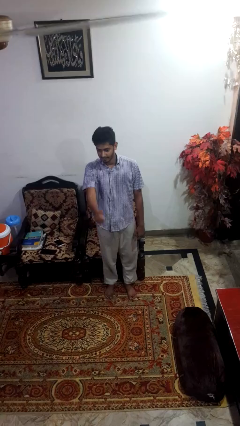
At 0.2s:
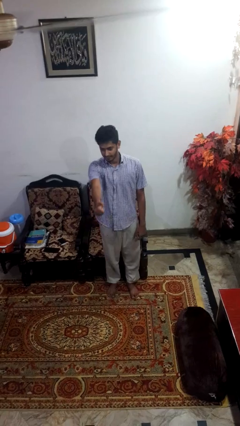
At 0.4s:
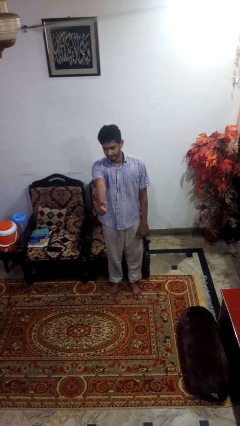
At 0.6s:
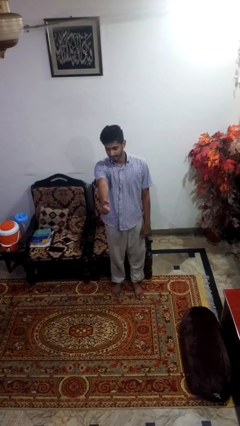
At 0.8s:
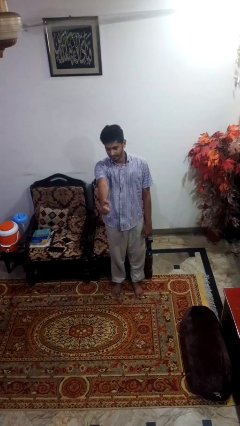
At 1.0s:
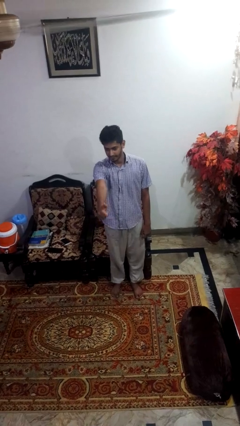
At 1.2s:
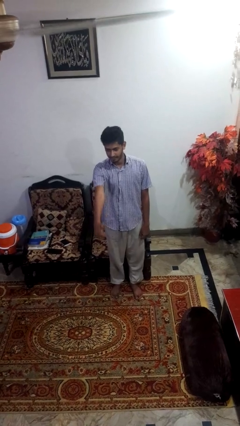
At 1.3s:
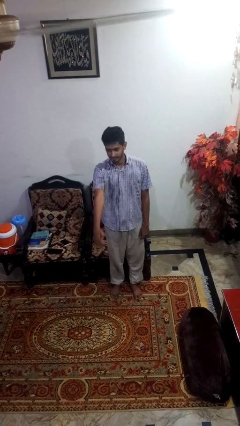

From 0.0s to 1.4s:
person gestures thumbs up

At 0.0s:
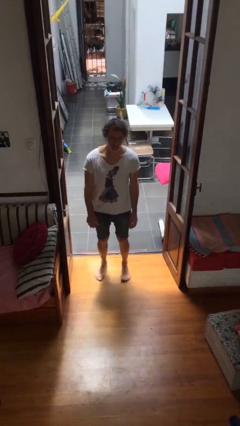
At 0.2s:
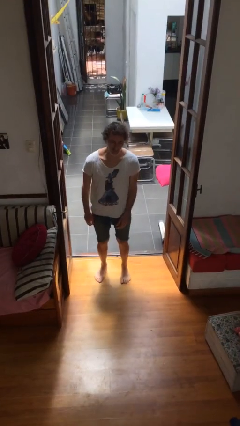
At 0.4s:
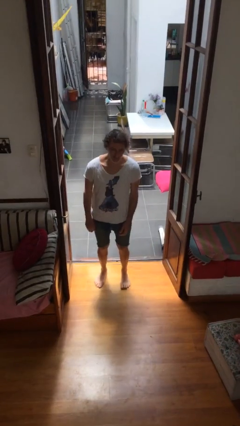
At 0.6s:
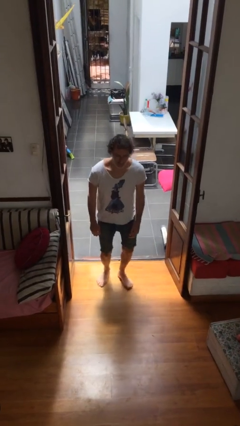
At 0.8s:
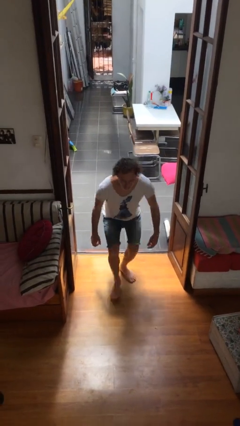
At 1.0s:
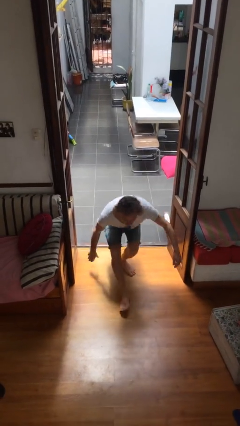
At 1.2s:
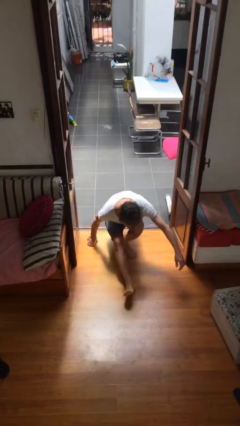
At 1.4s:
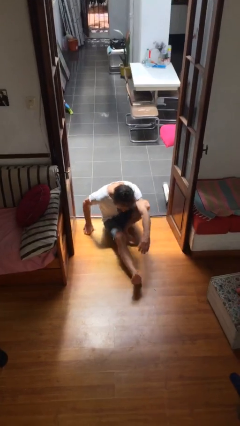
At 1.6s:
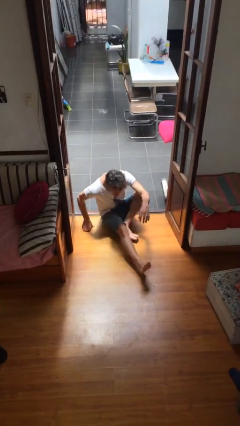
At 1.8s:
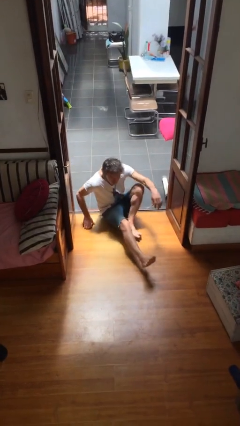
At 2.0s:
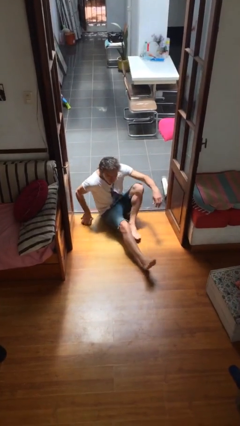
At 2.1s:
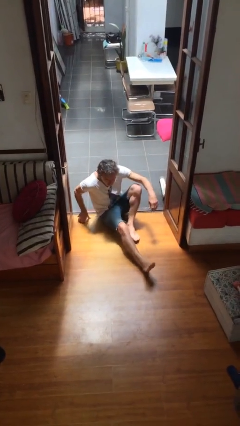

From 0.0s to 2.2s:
person sits down

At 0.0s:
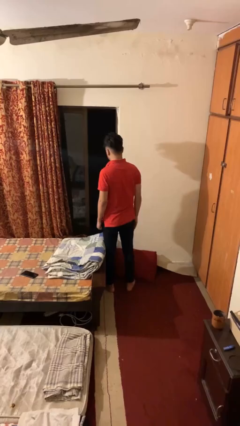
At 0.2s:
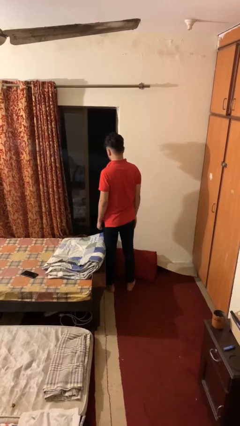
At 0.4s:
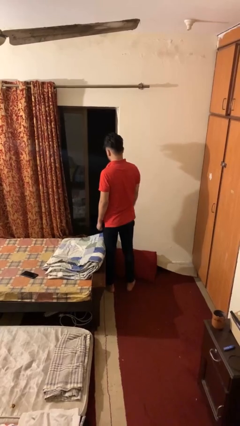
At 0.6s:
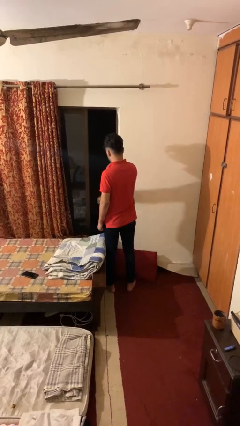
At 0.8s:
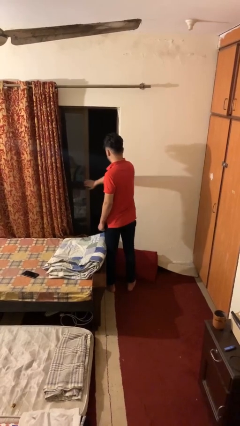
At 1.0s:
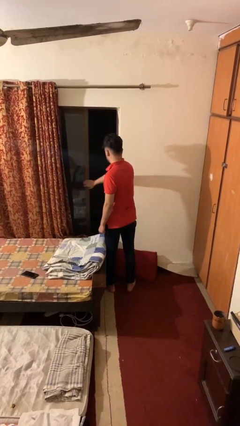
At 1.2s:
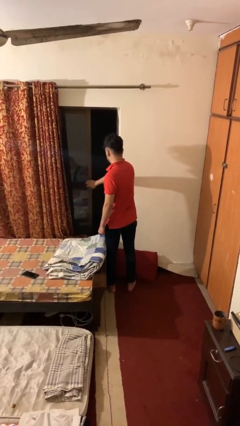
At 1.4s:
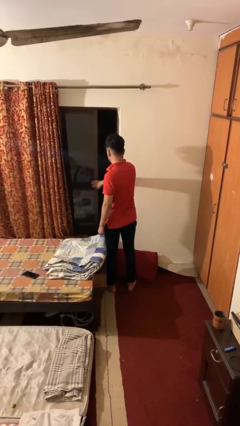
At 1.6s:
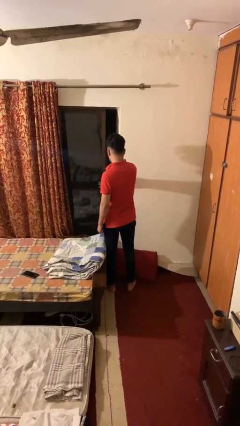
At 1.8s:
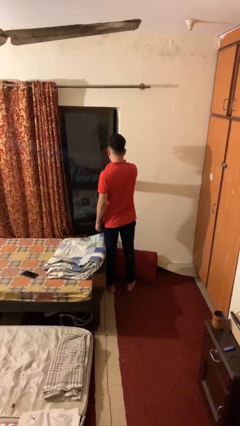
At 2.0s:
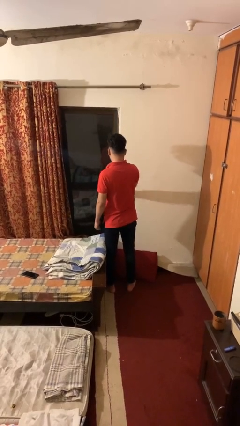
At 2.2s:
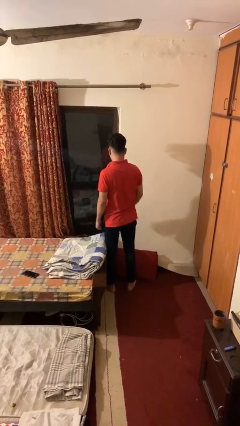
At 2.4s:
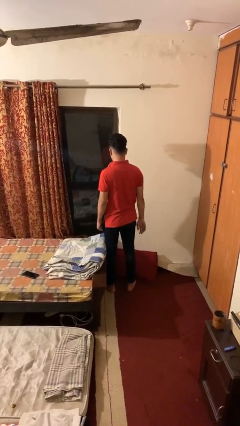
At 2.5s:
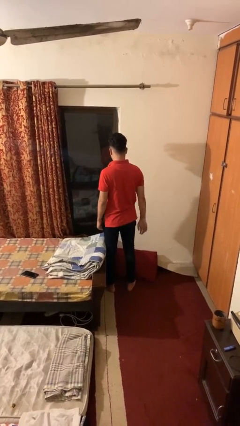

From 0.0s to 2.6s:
person closes home window

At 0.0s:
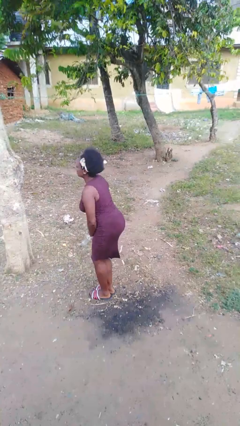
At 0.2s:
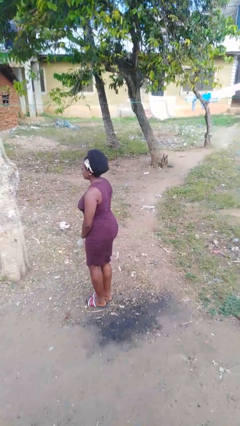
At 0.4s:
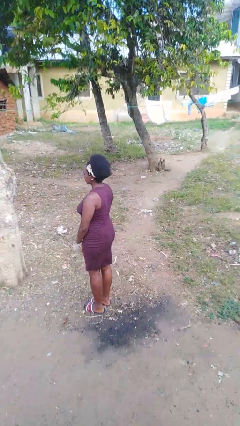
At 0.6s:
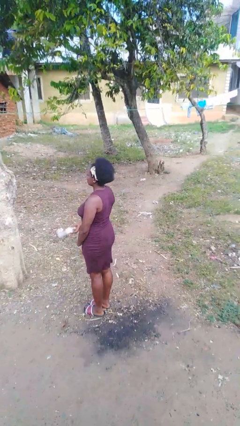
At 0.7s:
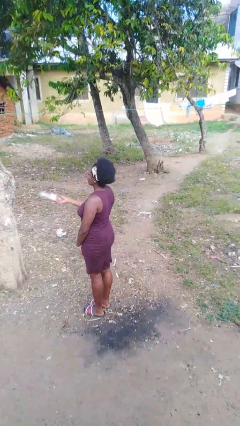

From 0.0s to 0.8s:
person throws object into air

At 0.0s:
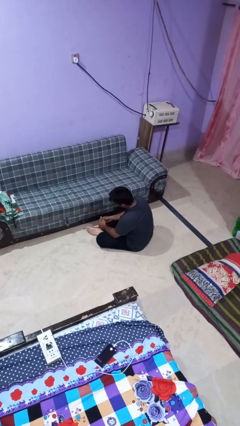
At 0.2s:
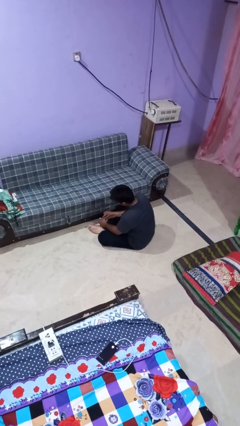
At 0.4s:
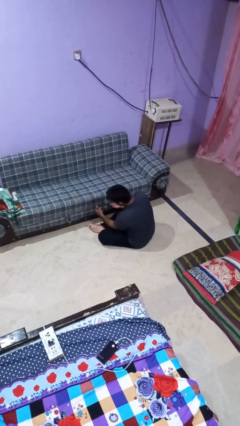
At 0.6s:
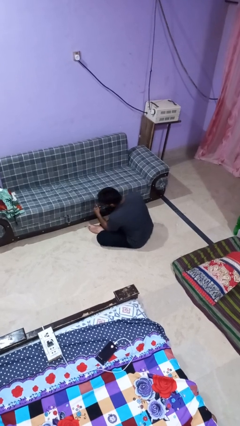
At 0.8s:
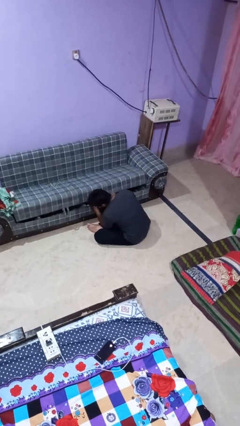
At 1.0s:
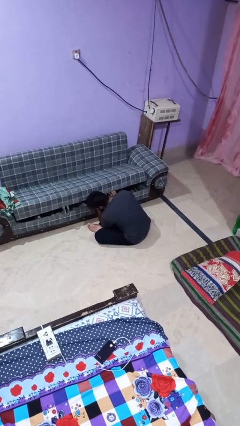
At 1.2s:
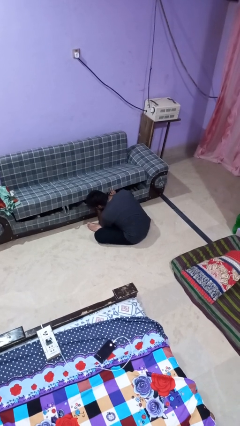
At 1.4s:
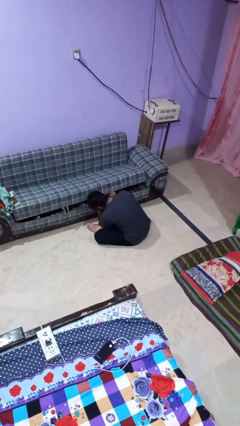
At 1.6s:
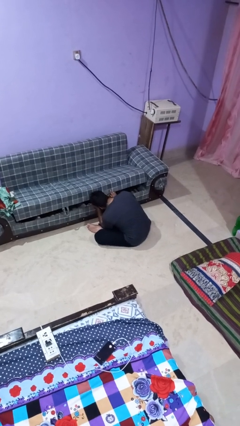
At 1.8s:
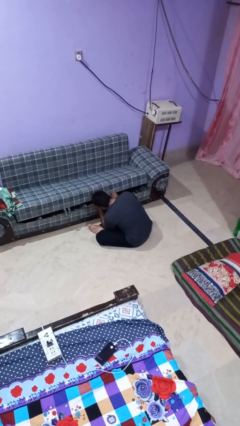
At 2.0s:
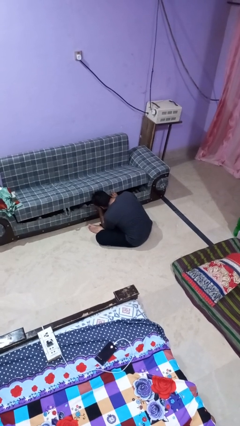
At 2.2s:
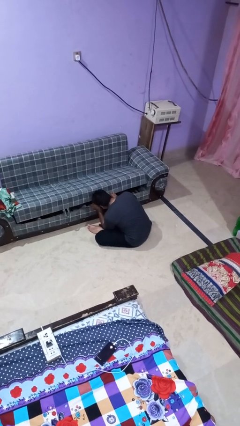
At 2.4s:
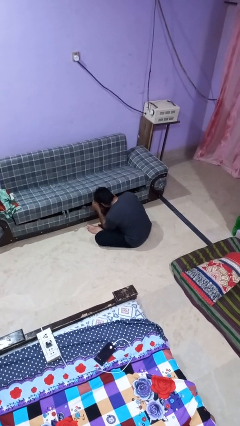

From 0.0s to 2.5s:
person searches under couch

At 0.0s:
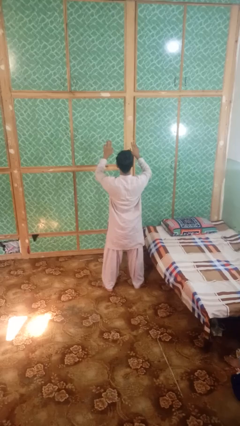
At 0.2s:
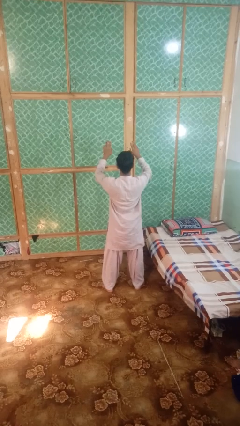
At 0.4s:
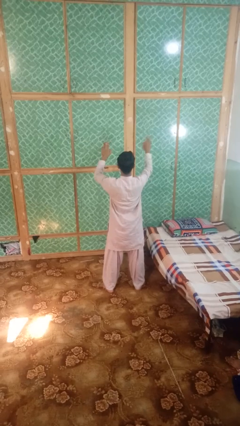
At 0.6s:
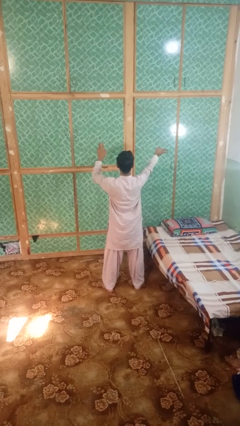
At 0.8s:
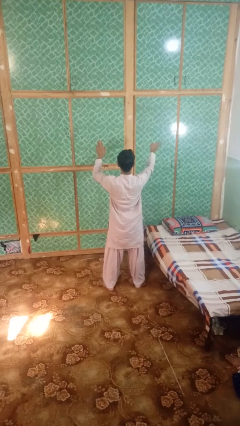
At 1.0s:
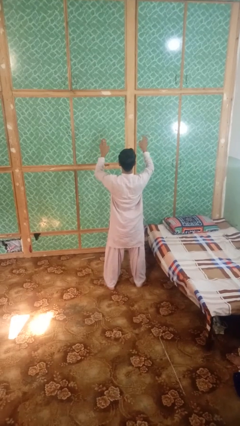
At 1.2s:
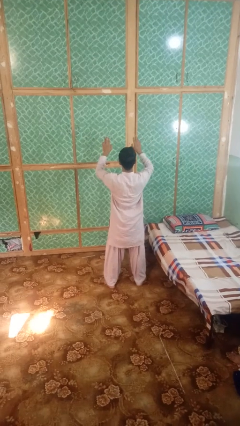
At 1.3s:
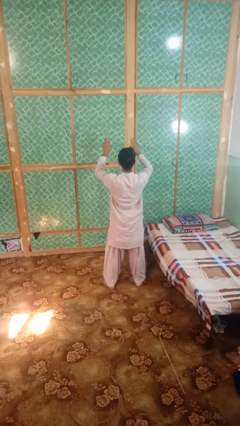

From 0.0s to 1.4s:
person gestures swipe right

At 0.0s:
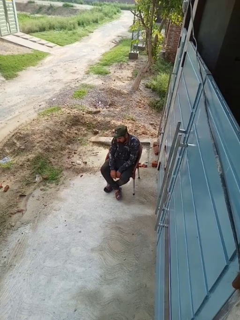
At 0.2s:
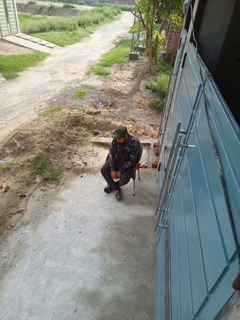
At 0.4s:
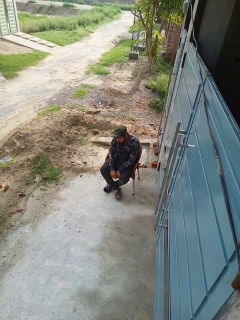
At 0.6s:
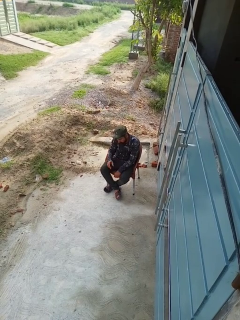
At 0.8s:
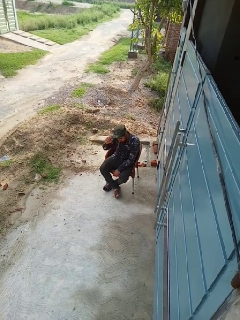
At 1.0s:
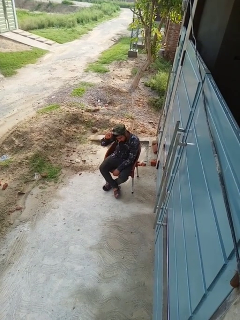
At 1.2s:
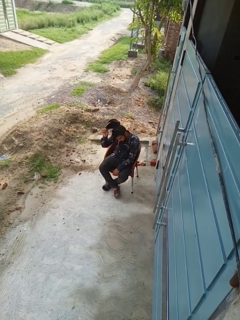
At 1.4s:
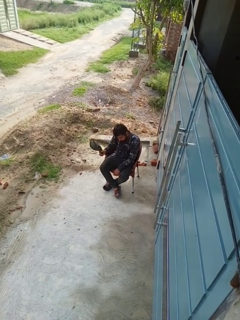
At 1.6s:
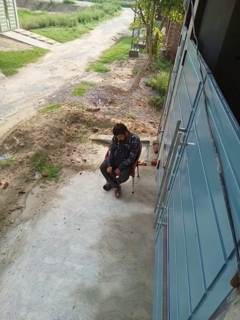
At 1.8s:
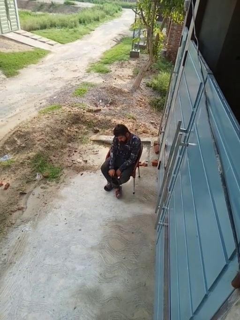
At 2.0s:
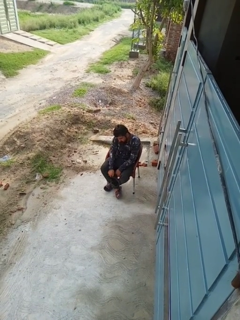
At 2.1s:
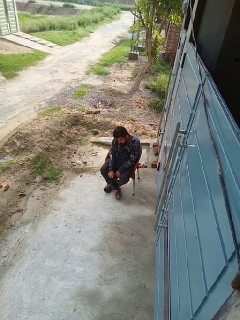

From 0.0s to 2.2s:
person takes off hat

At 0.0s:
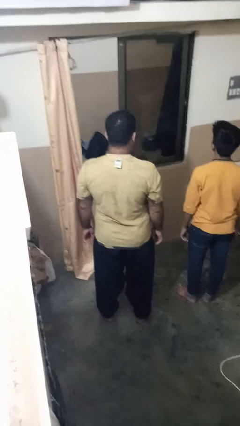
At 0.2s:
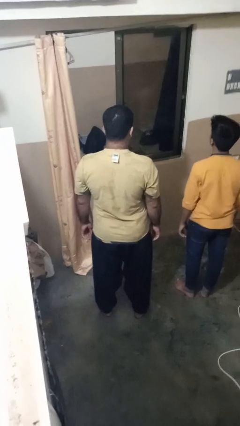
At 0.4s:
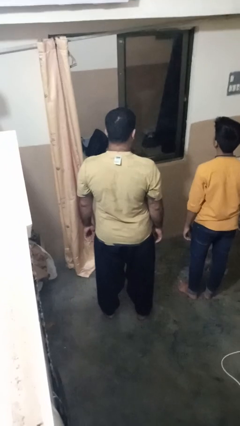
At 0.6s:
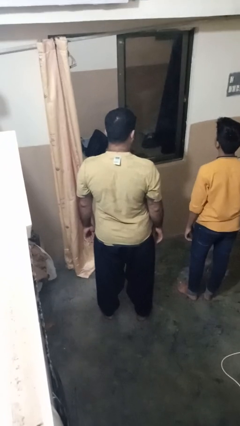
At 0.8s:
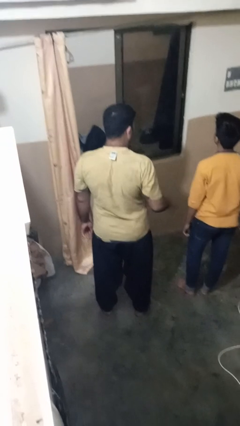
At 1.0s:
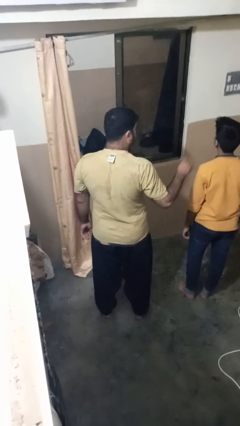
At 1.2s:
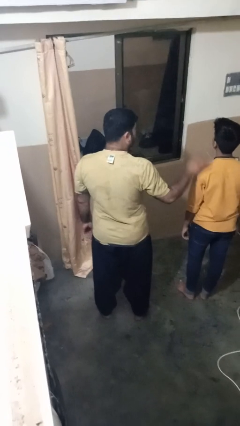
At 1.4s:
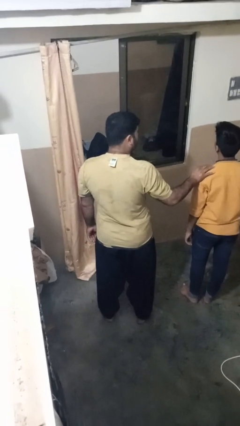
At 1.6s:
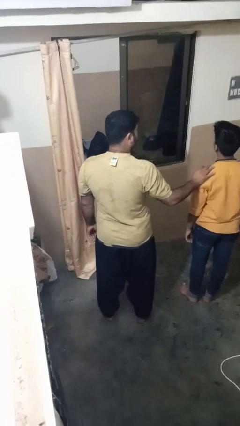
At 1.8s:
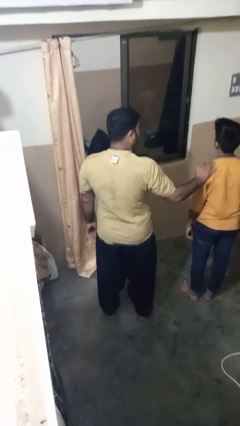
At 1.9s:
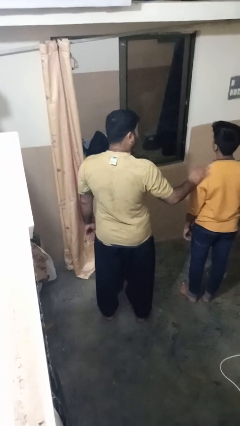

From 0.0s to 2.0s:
person pounds shoulders of person

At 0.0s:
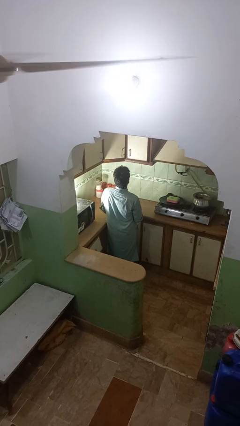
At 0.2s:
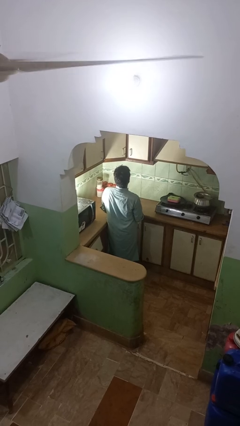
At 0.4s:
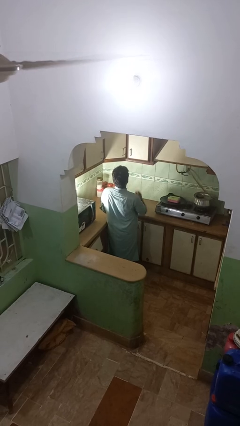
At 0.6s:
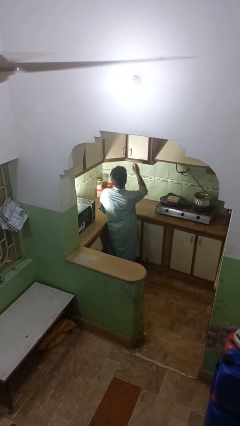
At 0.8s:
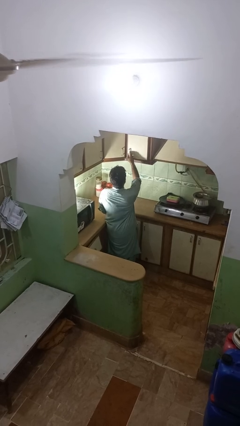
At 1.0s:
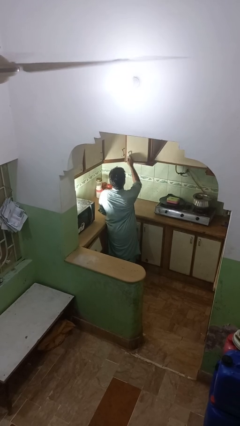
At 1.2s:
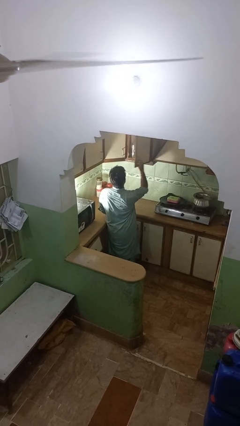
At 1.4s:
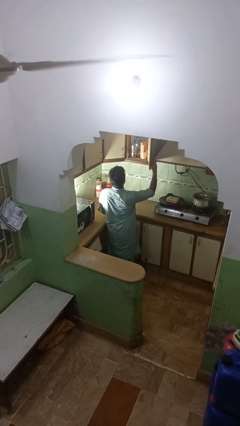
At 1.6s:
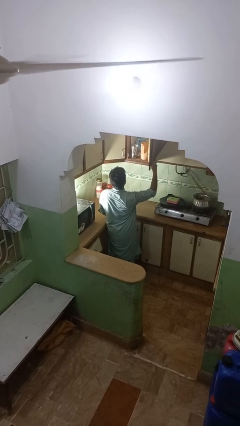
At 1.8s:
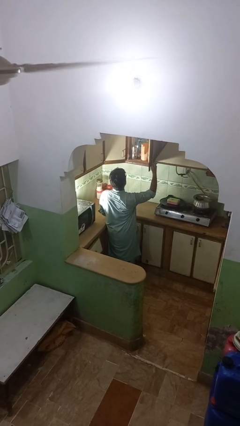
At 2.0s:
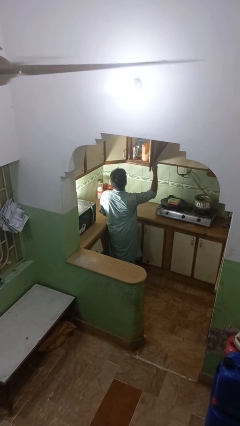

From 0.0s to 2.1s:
person opens kitchen drawer

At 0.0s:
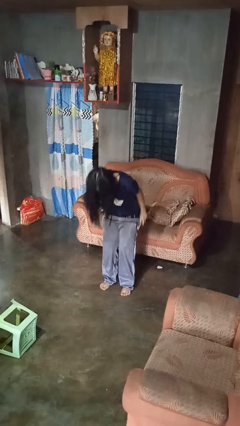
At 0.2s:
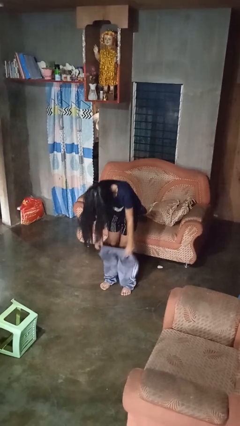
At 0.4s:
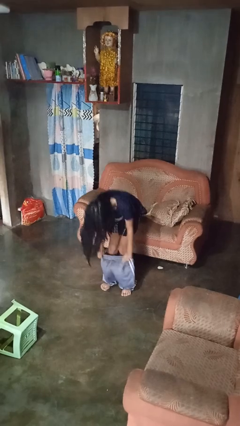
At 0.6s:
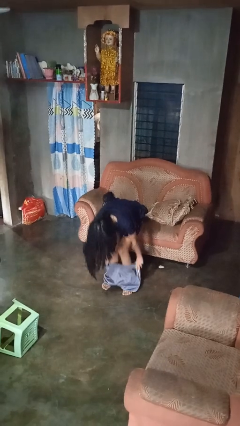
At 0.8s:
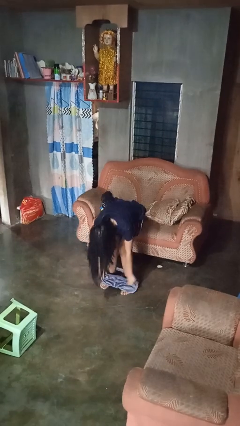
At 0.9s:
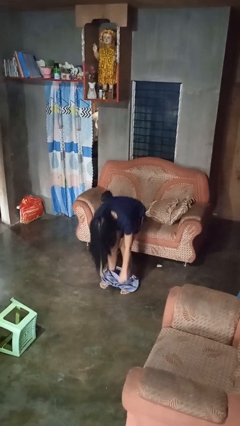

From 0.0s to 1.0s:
person takes off pants
